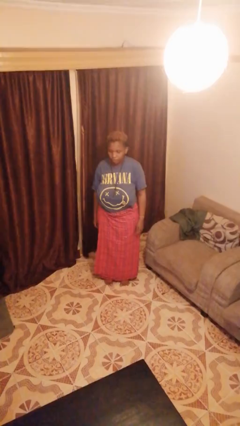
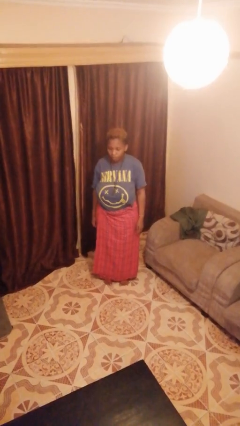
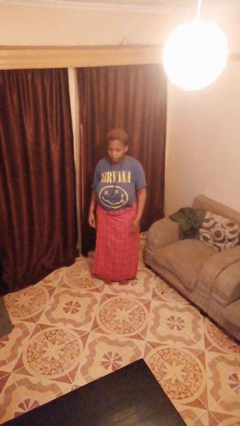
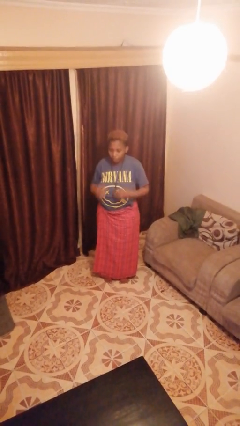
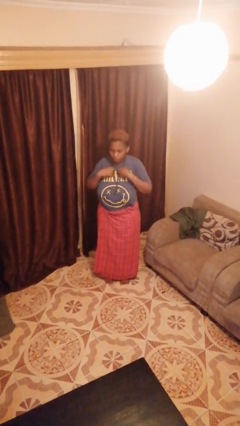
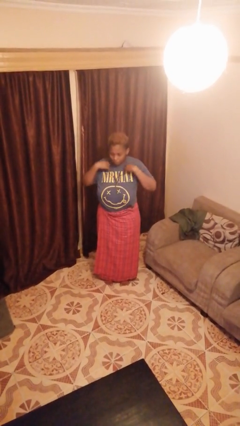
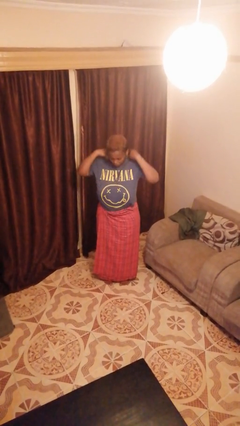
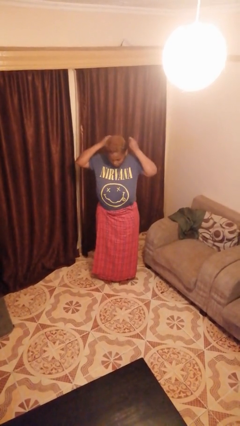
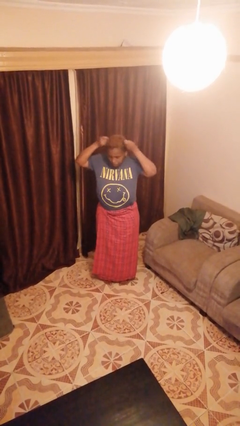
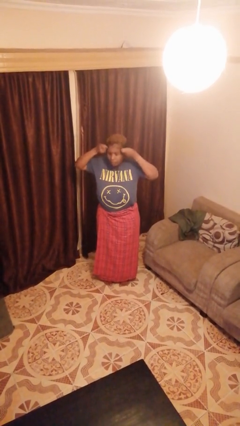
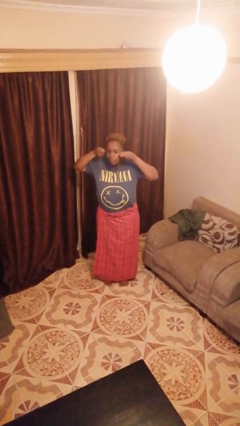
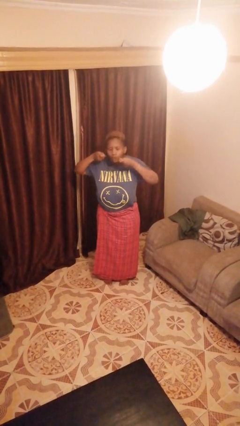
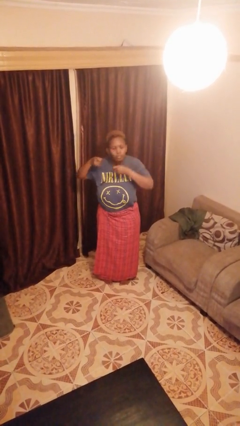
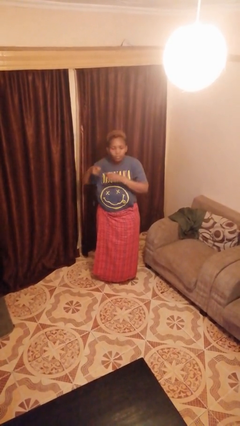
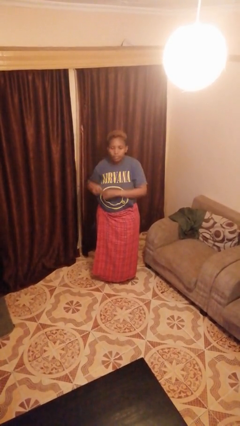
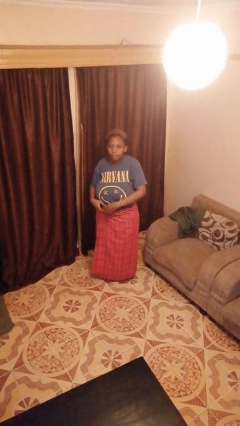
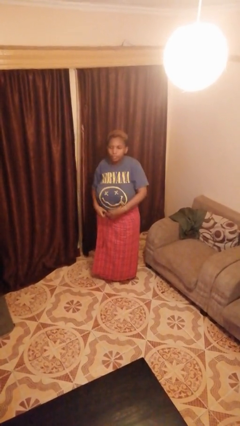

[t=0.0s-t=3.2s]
person takes off necklace

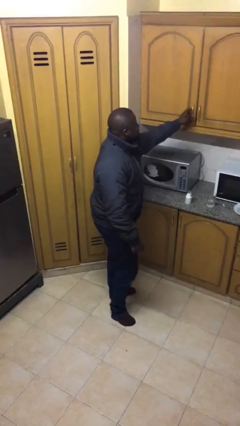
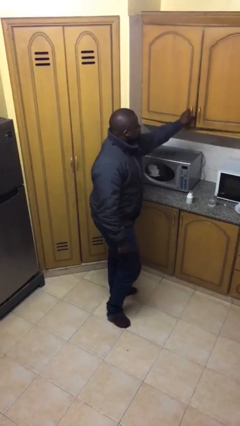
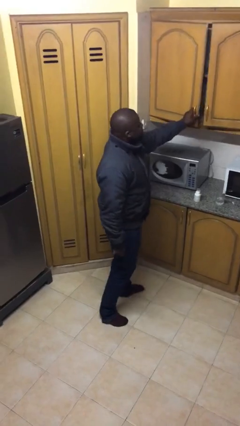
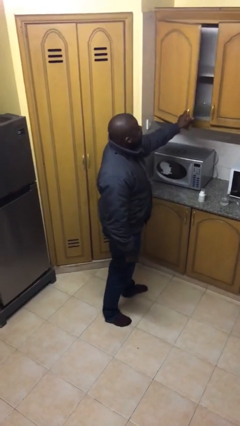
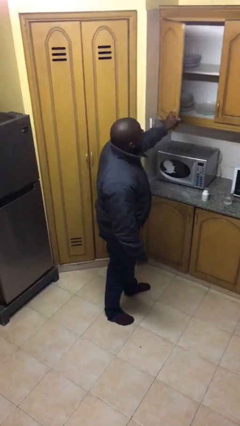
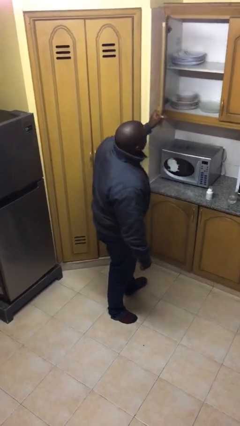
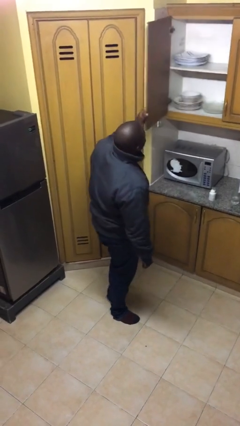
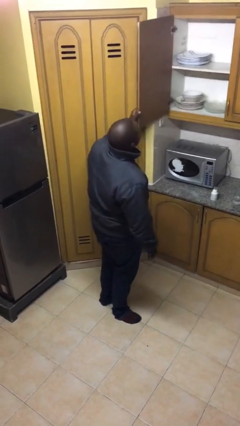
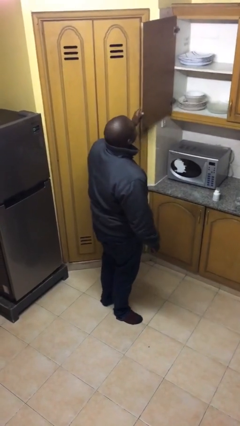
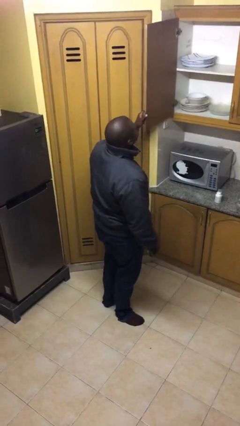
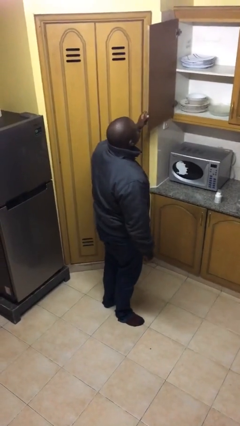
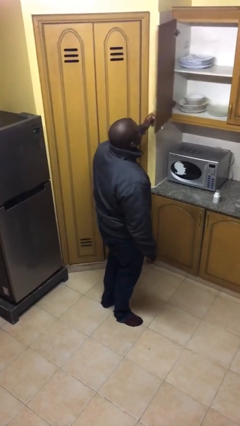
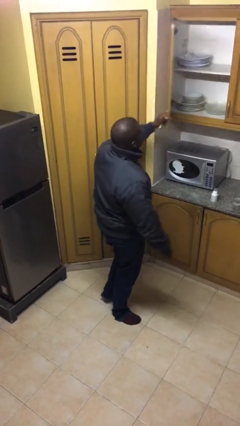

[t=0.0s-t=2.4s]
person closes cabinet

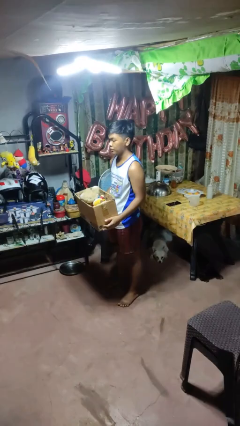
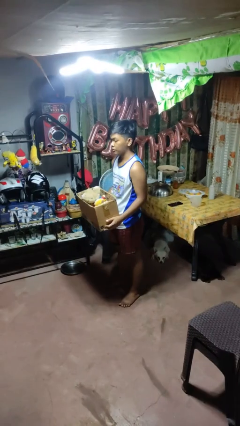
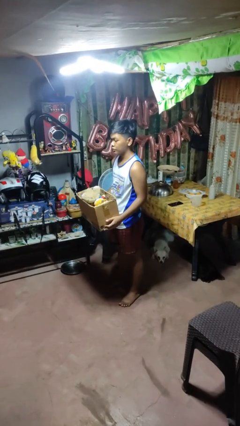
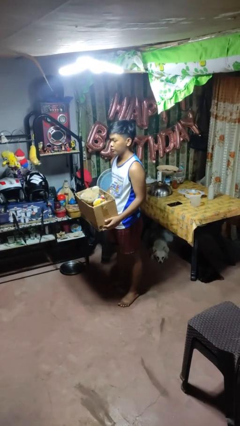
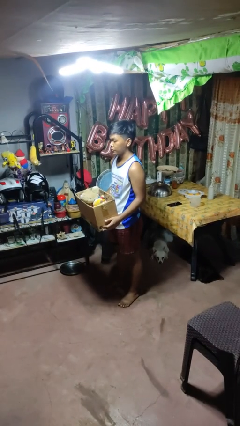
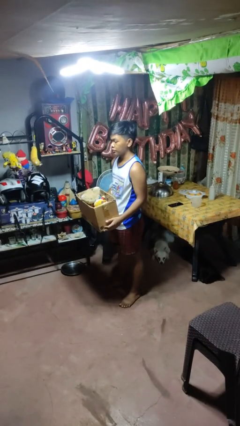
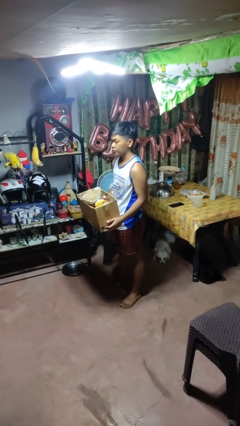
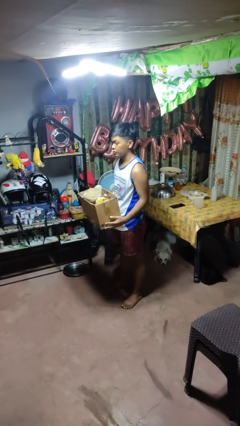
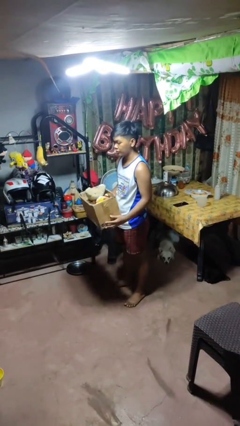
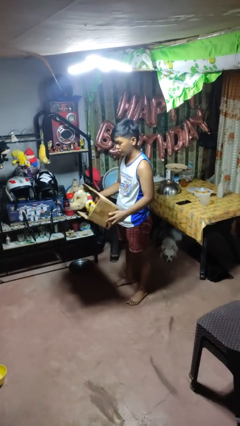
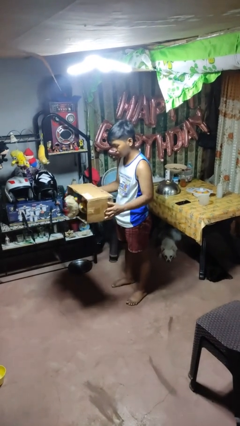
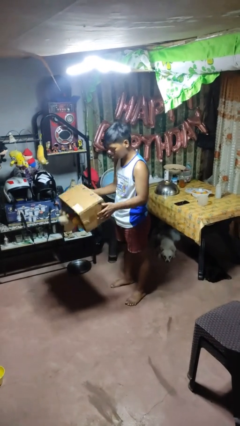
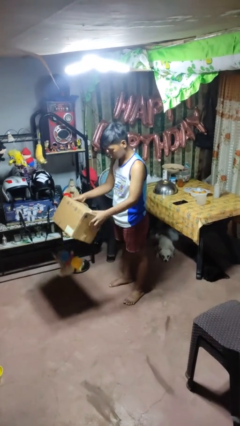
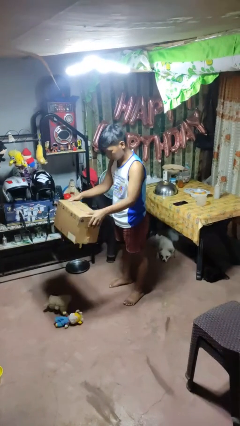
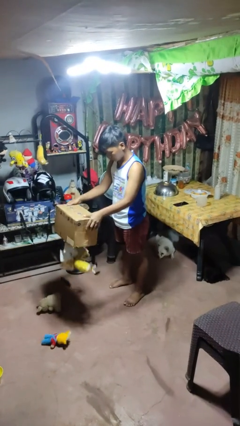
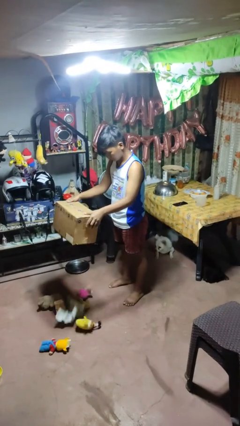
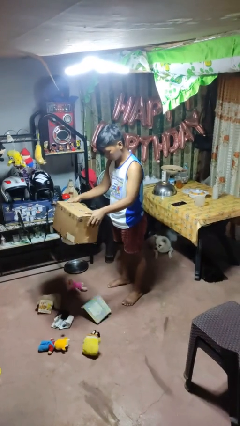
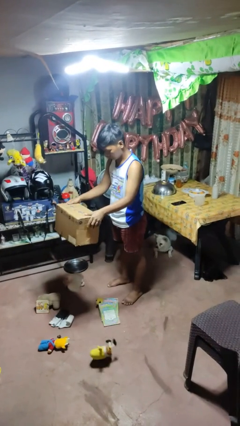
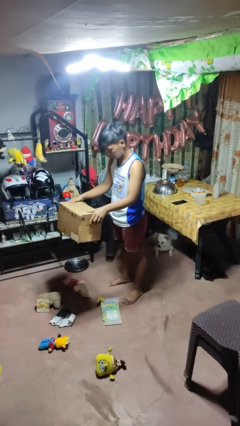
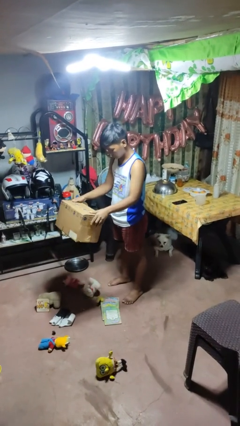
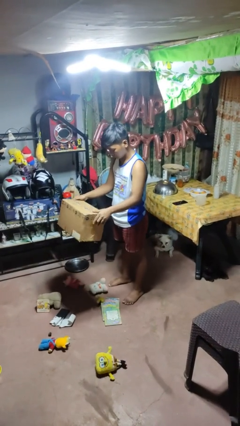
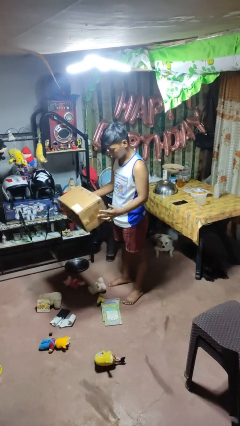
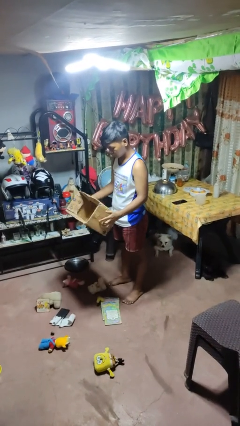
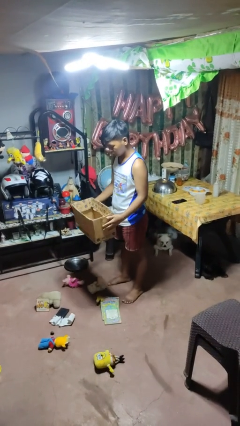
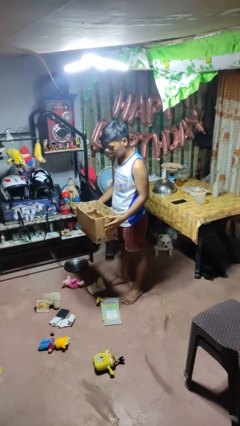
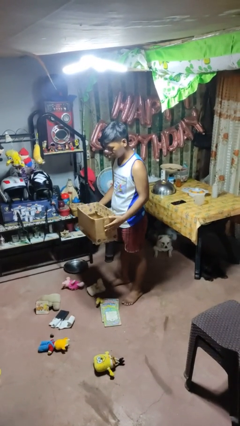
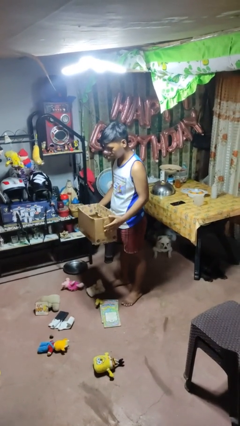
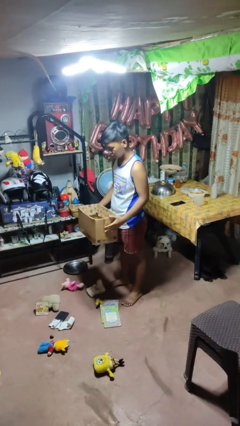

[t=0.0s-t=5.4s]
person unloads box onto floor

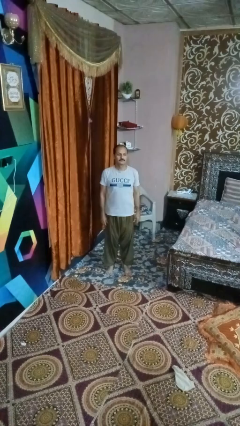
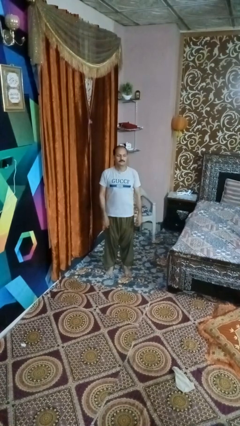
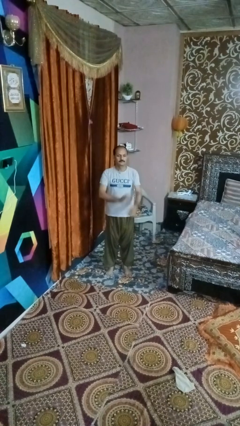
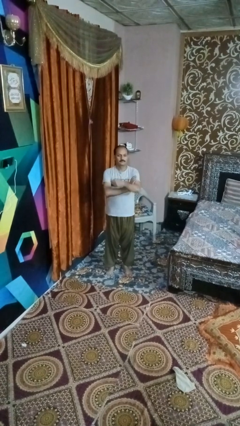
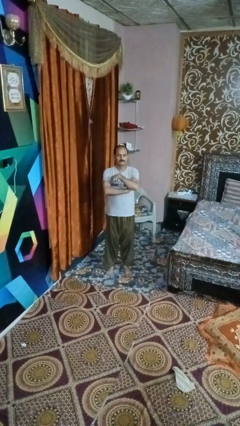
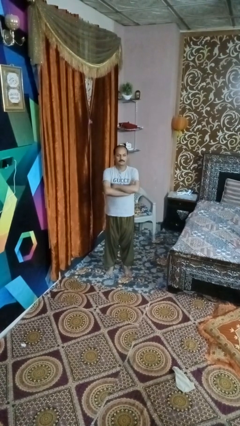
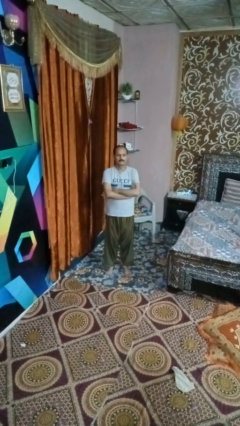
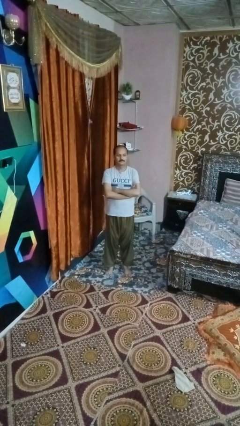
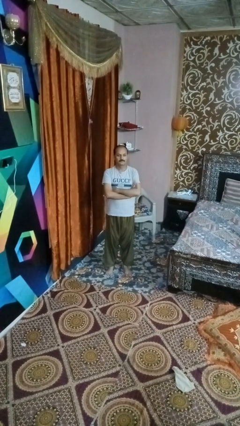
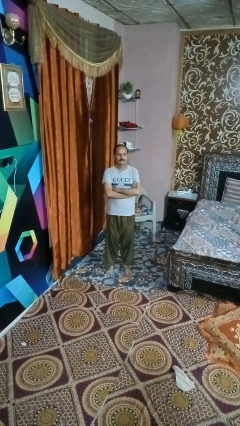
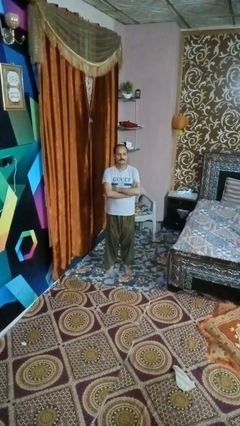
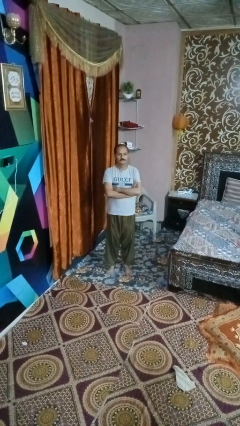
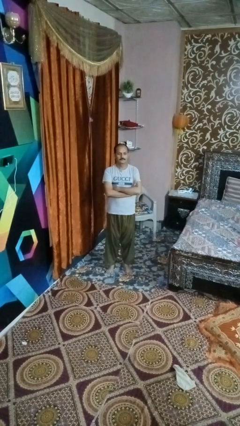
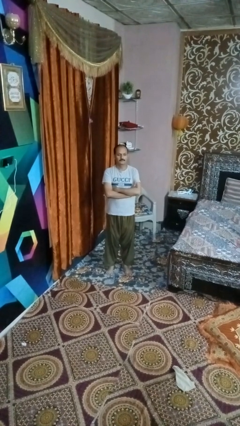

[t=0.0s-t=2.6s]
person crosses arms

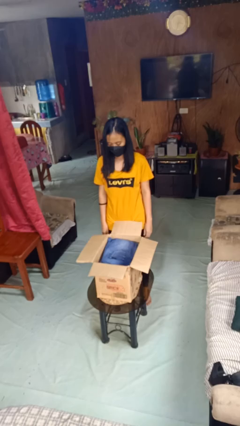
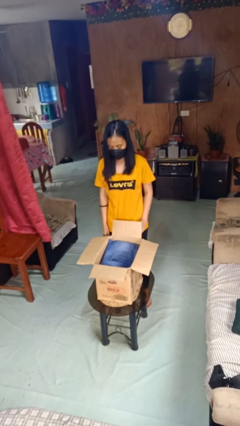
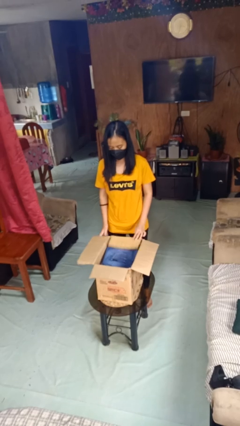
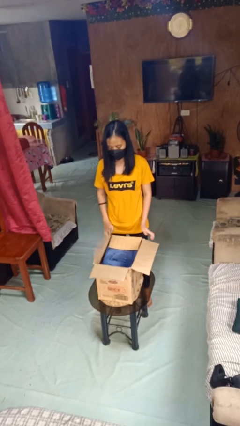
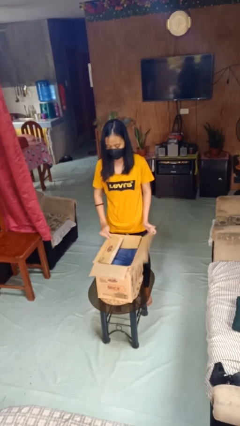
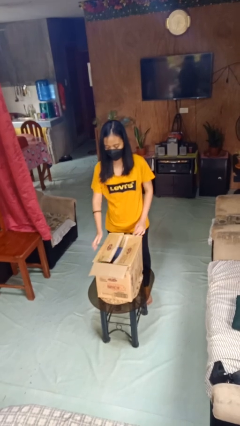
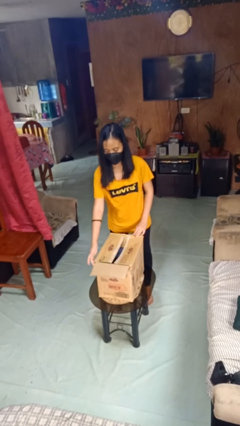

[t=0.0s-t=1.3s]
person closes box

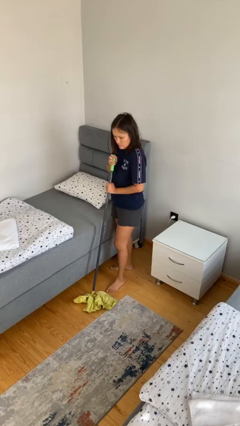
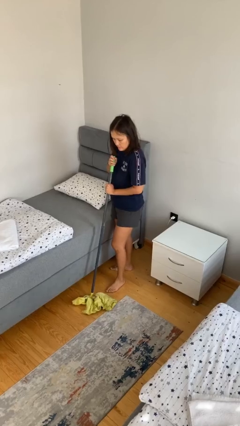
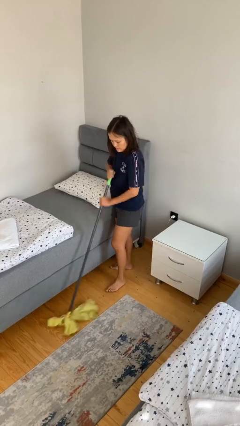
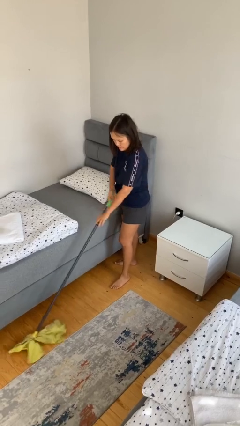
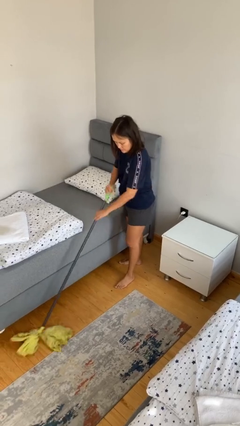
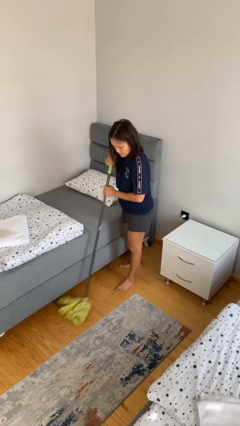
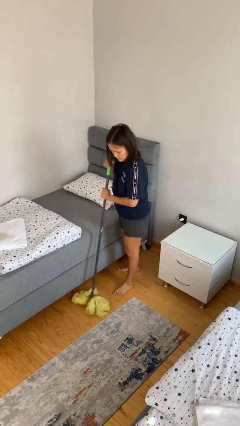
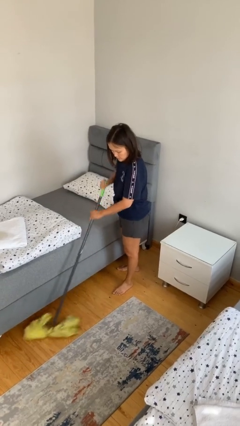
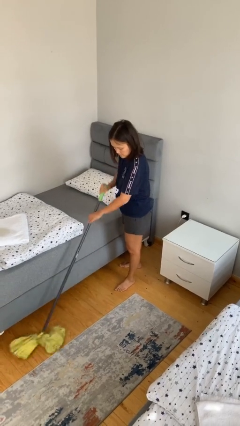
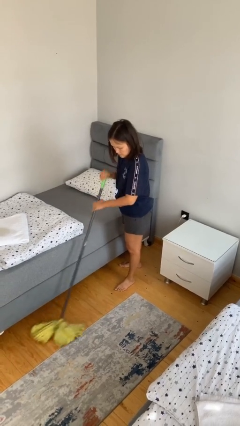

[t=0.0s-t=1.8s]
person sweeps floor

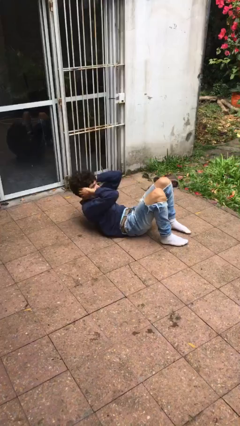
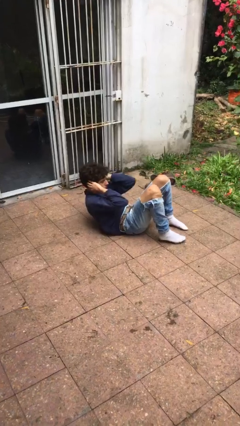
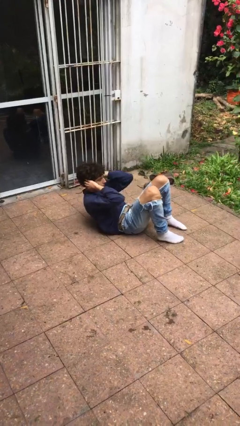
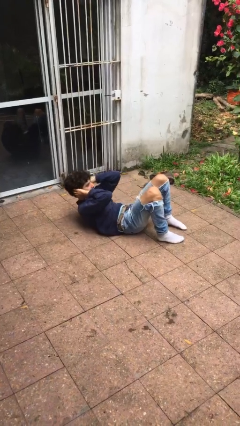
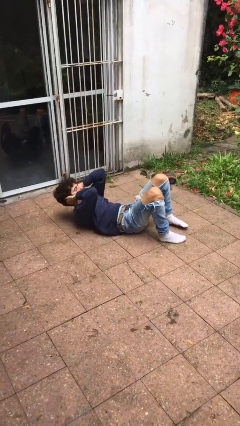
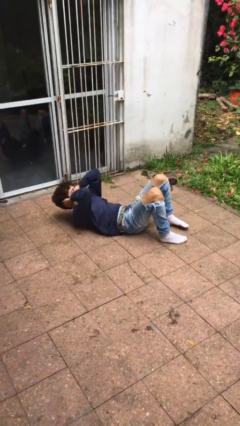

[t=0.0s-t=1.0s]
person exercises with situp
